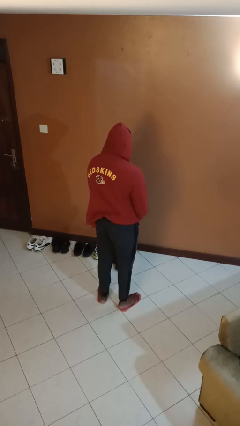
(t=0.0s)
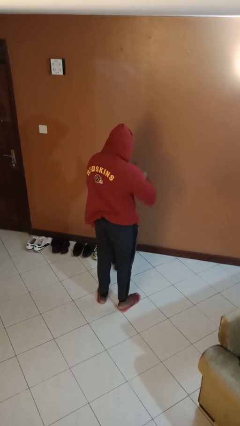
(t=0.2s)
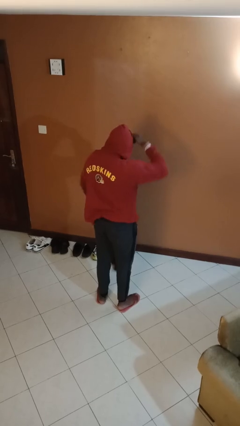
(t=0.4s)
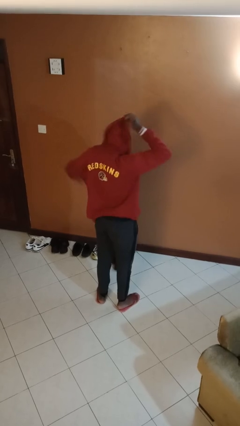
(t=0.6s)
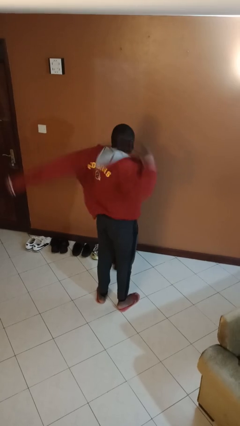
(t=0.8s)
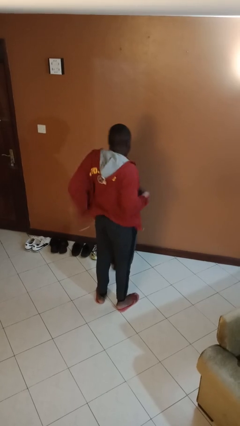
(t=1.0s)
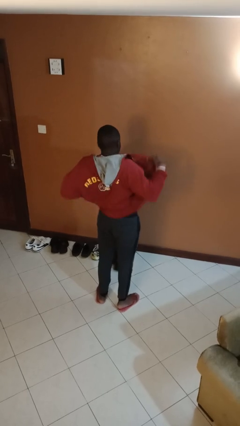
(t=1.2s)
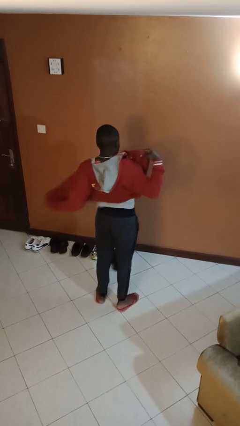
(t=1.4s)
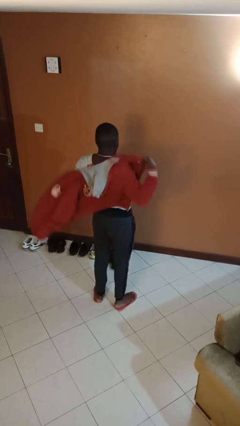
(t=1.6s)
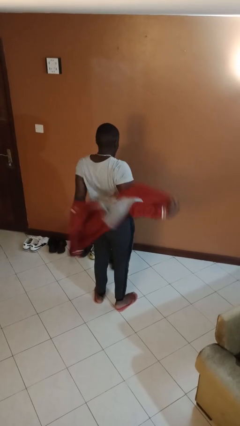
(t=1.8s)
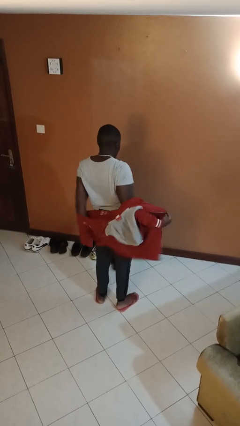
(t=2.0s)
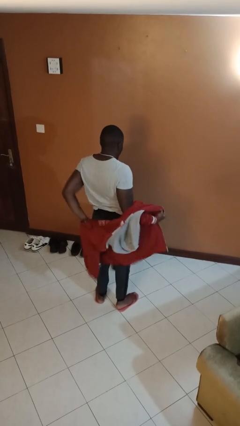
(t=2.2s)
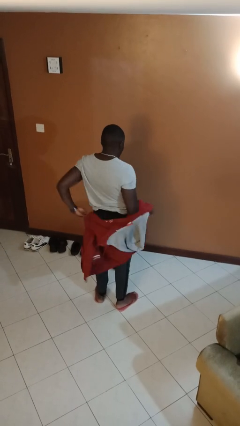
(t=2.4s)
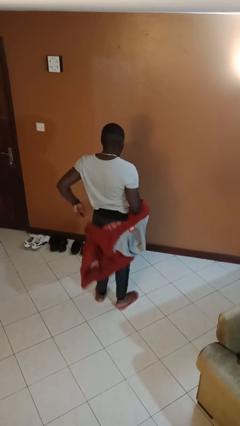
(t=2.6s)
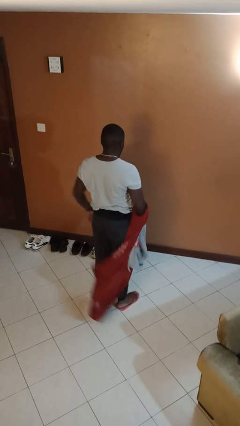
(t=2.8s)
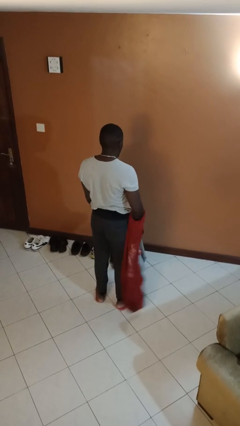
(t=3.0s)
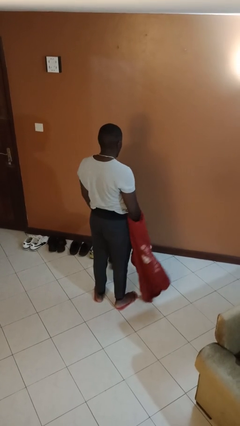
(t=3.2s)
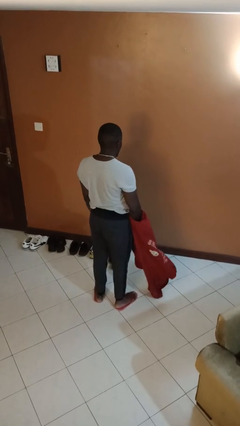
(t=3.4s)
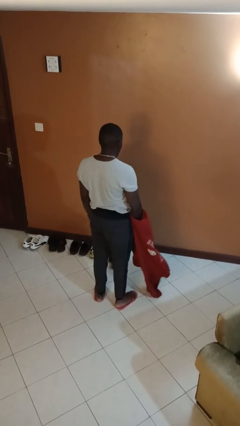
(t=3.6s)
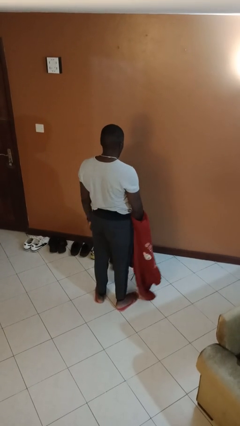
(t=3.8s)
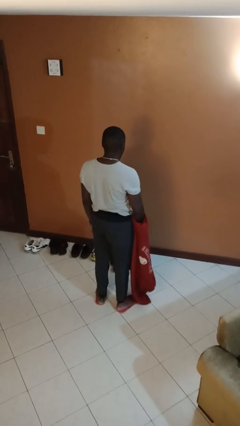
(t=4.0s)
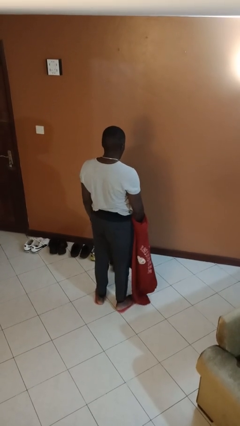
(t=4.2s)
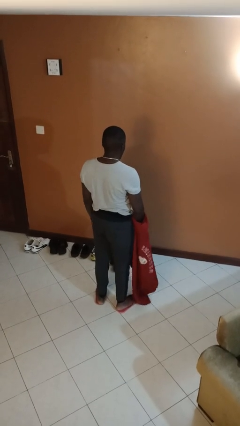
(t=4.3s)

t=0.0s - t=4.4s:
person takes off hoodie

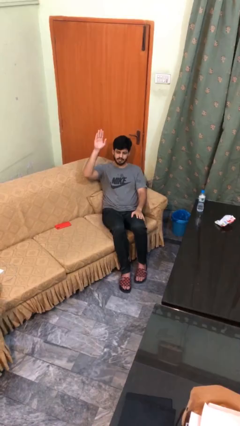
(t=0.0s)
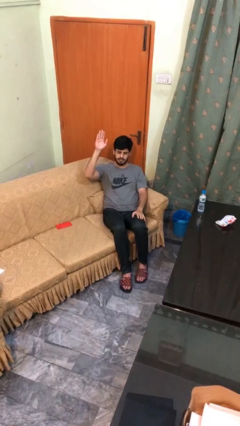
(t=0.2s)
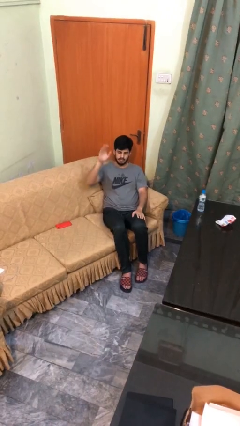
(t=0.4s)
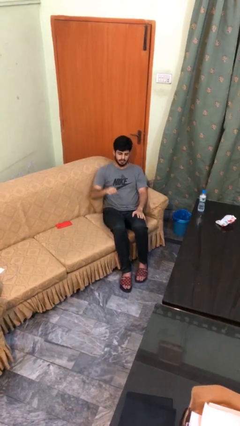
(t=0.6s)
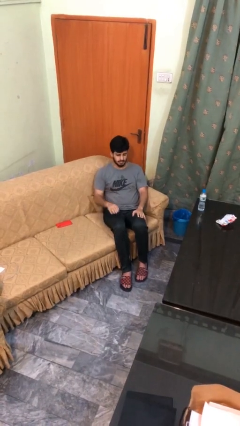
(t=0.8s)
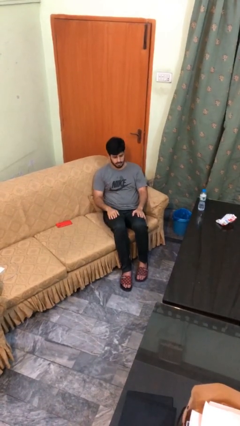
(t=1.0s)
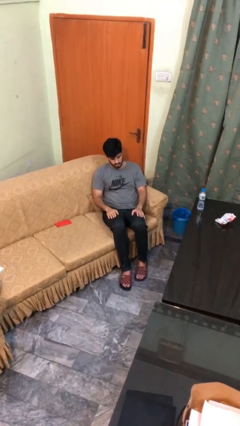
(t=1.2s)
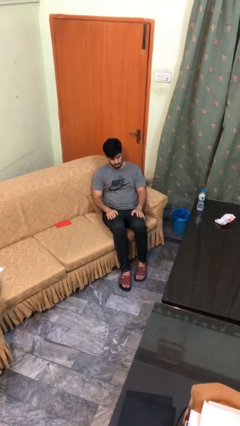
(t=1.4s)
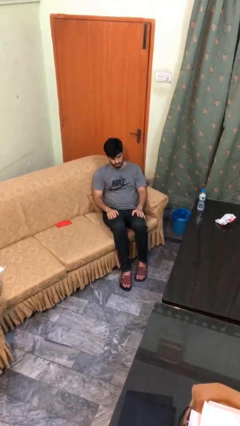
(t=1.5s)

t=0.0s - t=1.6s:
person gestures lower hand

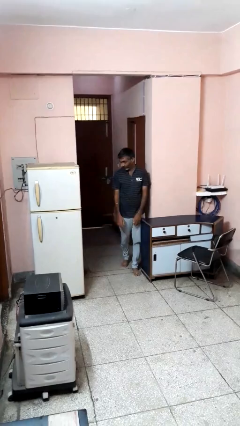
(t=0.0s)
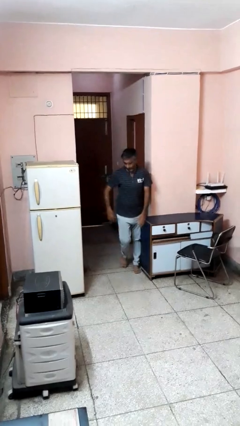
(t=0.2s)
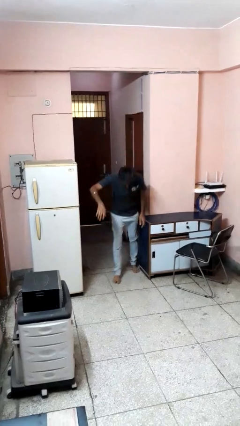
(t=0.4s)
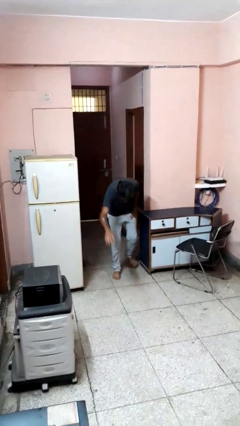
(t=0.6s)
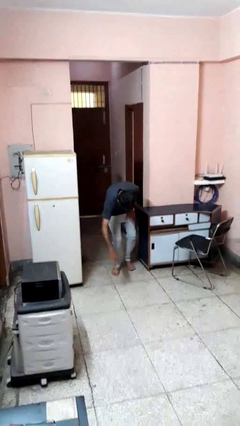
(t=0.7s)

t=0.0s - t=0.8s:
person trips on object on floor

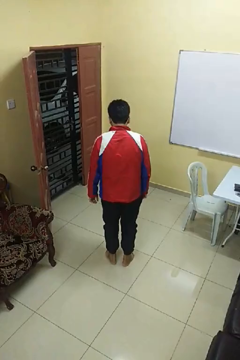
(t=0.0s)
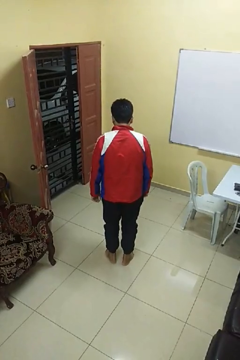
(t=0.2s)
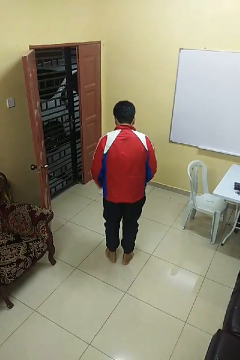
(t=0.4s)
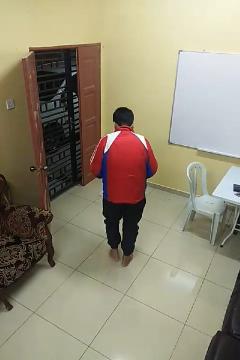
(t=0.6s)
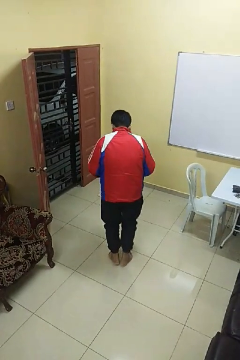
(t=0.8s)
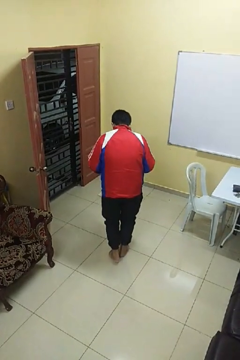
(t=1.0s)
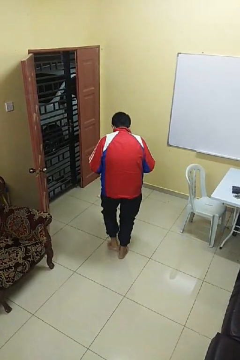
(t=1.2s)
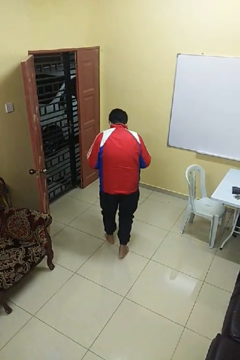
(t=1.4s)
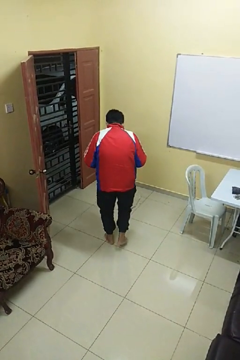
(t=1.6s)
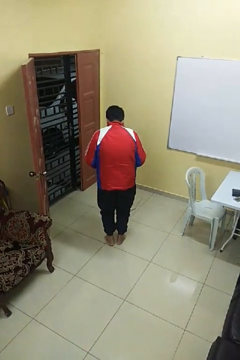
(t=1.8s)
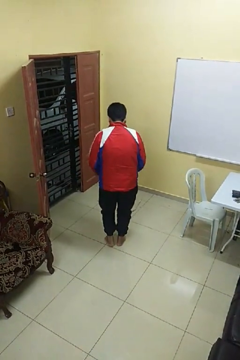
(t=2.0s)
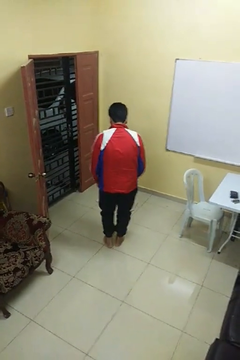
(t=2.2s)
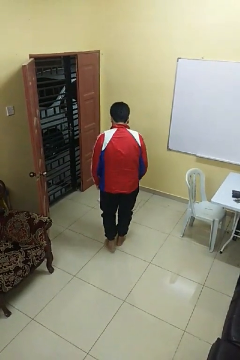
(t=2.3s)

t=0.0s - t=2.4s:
person walks tiptoe

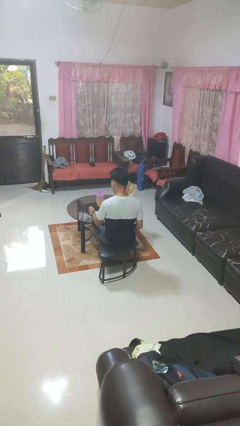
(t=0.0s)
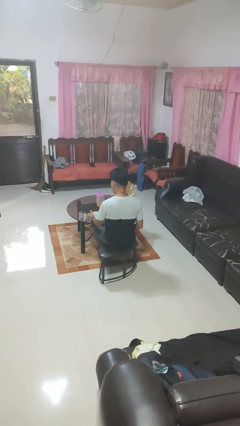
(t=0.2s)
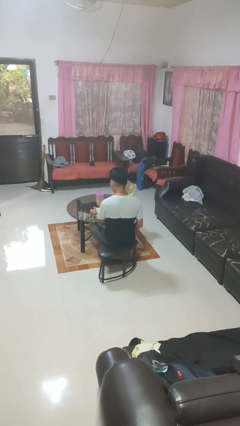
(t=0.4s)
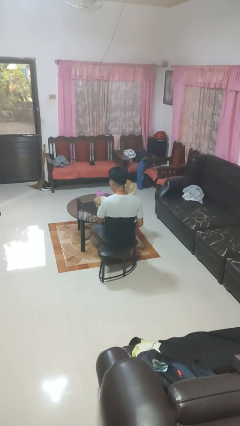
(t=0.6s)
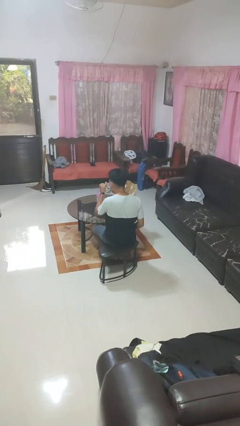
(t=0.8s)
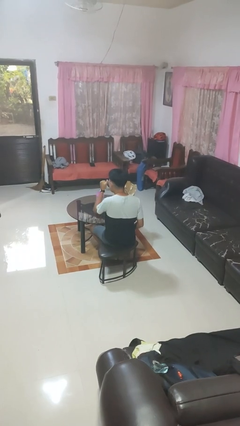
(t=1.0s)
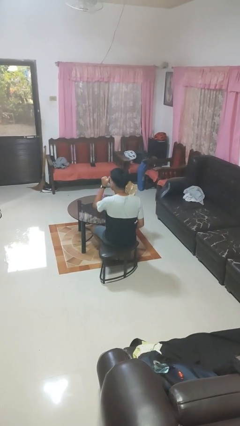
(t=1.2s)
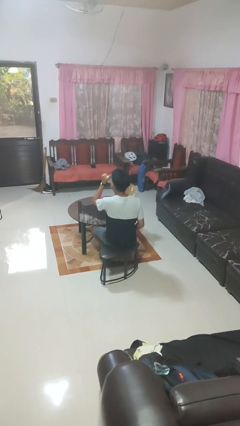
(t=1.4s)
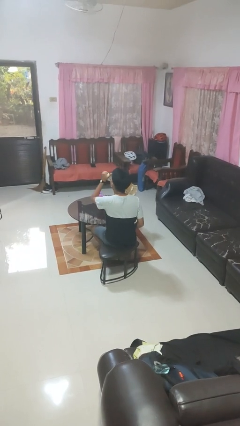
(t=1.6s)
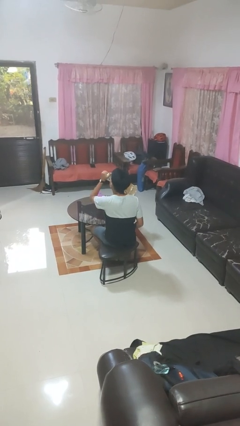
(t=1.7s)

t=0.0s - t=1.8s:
person drinks from mug

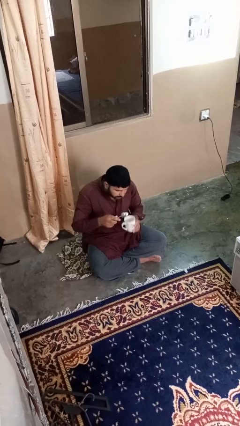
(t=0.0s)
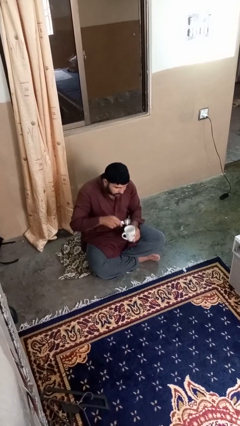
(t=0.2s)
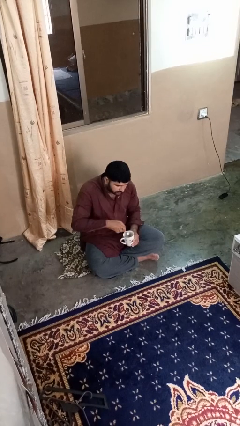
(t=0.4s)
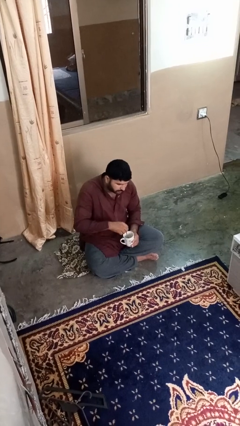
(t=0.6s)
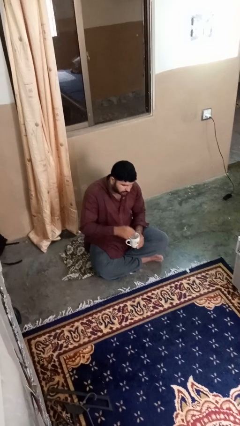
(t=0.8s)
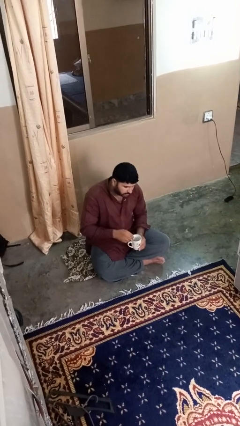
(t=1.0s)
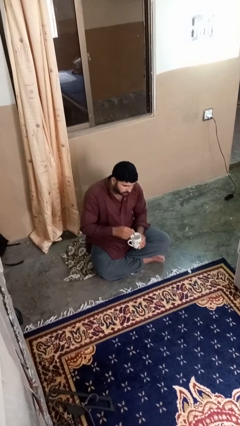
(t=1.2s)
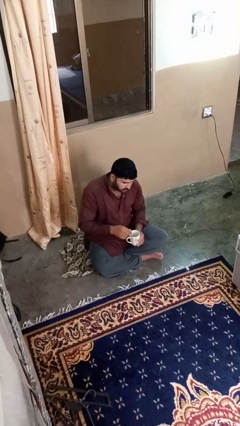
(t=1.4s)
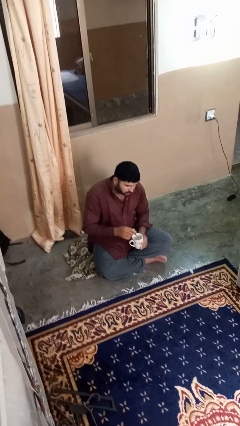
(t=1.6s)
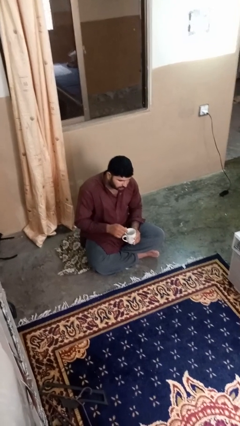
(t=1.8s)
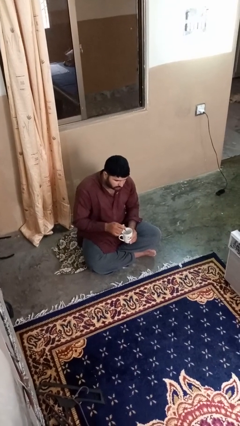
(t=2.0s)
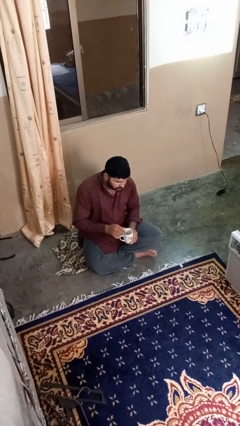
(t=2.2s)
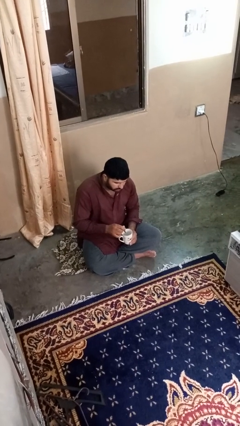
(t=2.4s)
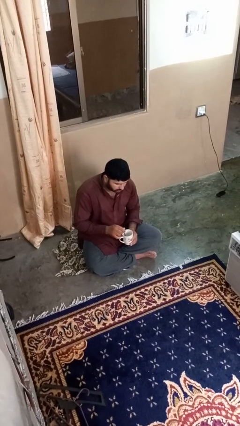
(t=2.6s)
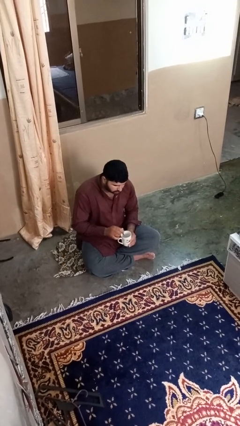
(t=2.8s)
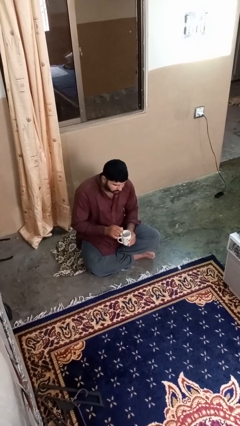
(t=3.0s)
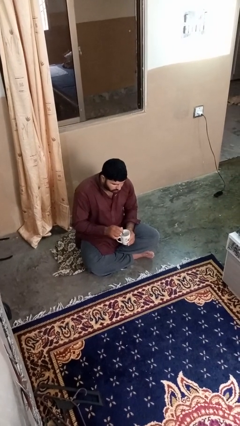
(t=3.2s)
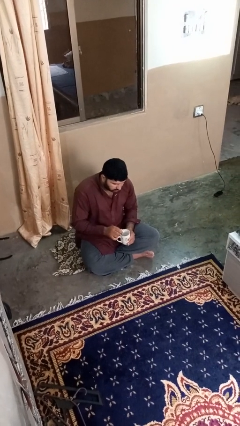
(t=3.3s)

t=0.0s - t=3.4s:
person stirs mug

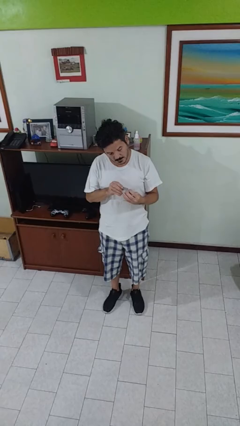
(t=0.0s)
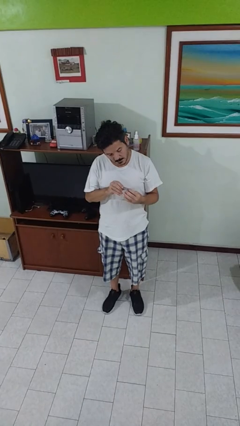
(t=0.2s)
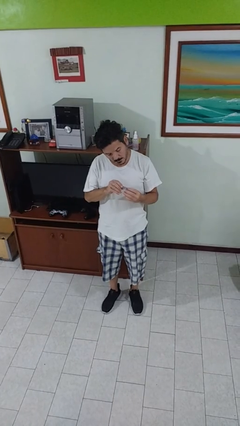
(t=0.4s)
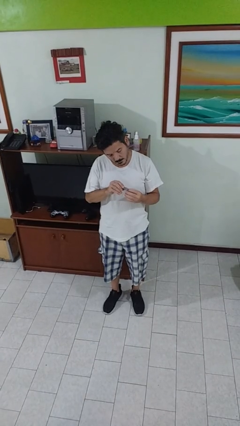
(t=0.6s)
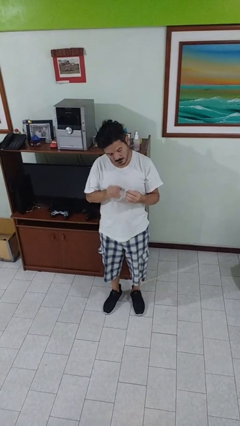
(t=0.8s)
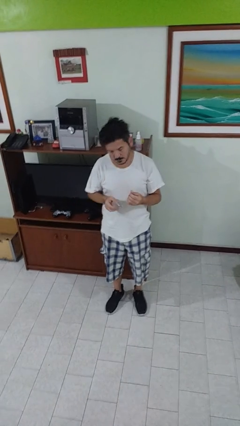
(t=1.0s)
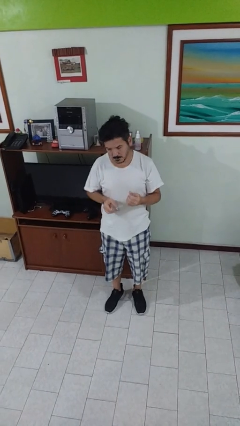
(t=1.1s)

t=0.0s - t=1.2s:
person clips fingernails

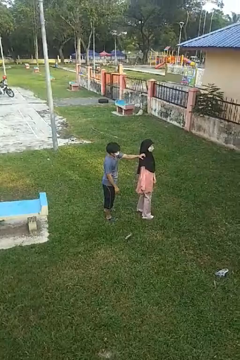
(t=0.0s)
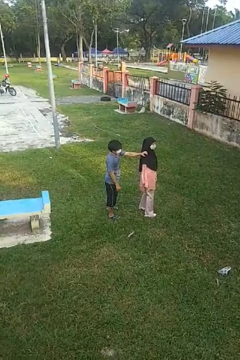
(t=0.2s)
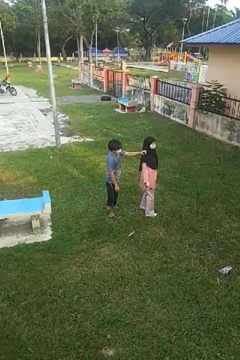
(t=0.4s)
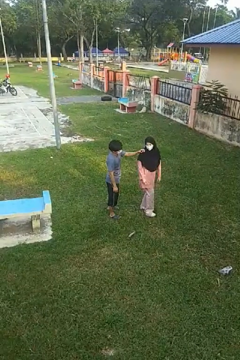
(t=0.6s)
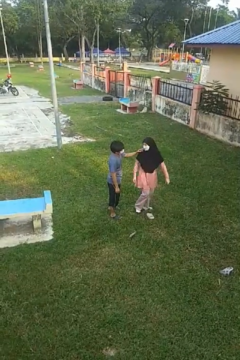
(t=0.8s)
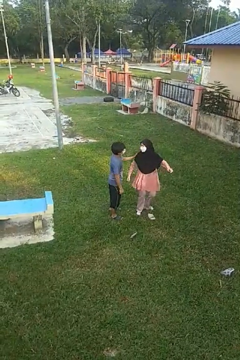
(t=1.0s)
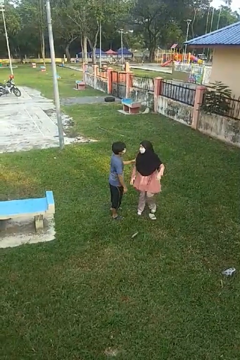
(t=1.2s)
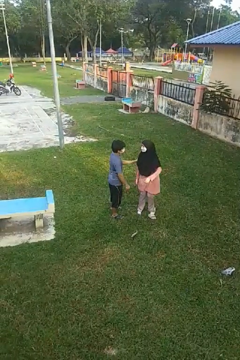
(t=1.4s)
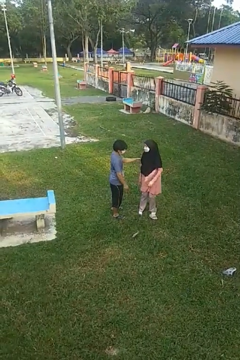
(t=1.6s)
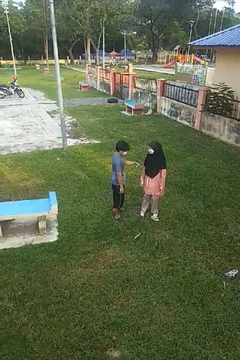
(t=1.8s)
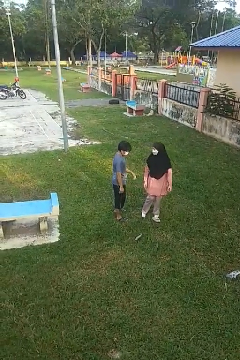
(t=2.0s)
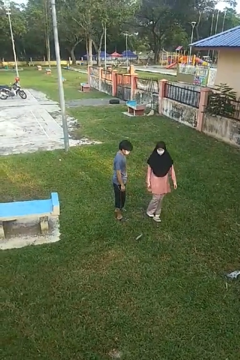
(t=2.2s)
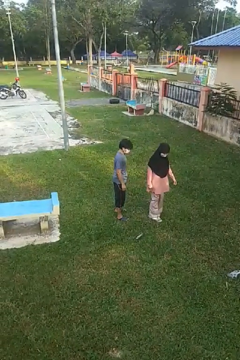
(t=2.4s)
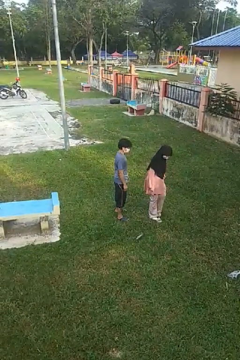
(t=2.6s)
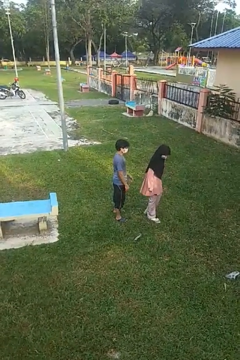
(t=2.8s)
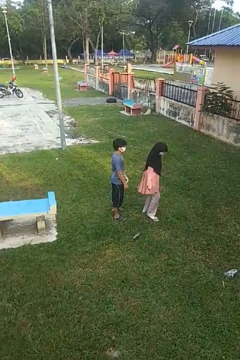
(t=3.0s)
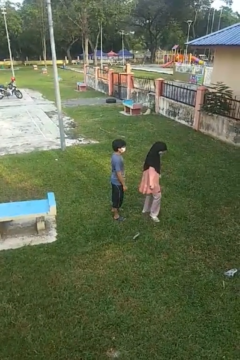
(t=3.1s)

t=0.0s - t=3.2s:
person spins person around
